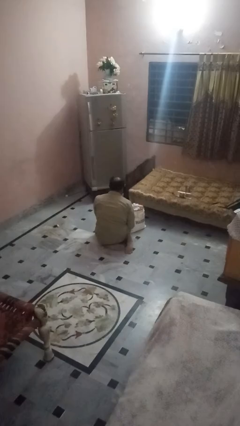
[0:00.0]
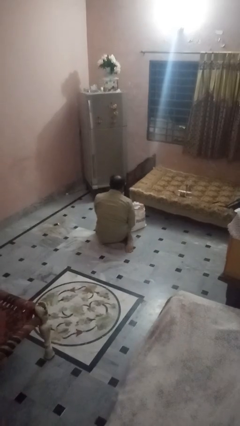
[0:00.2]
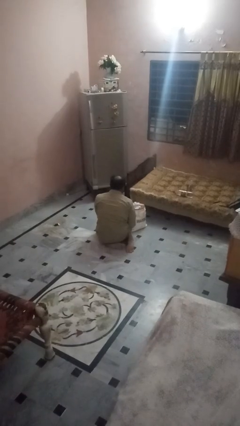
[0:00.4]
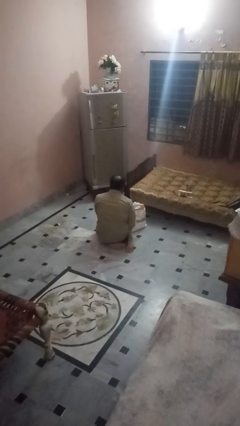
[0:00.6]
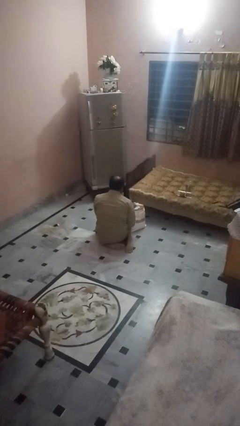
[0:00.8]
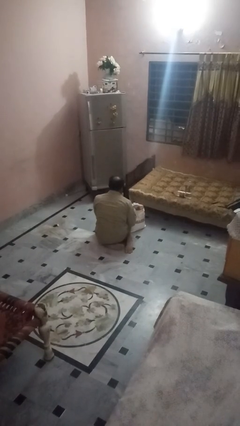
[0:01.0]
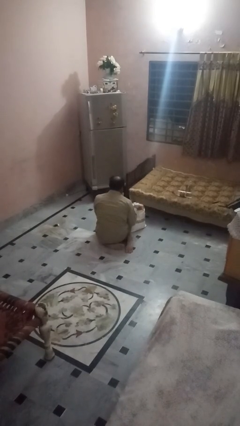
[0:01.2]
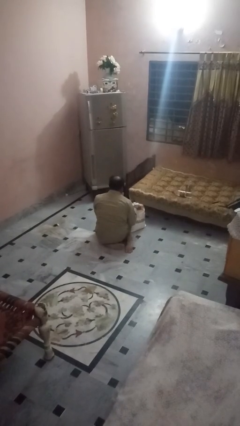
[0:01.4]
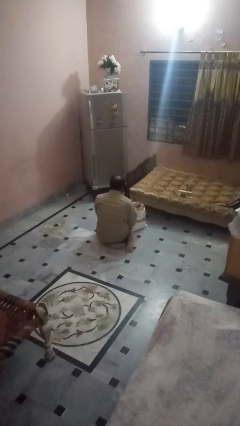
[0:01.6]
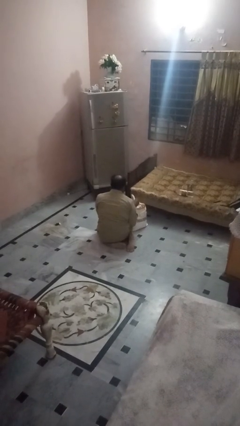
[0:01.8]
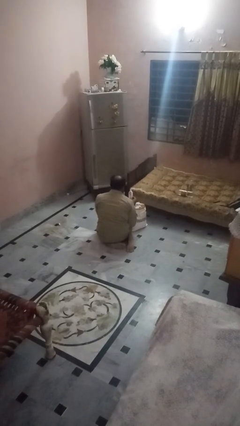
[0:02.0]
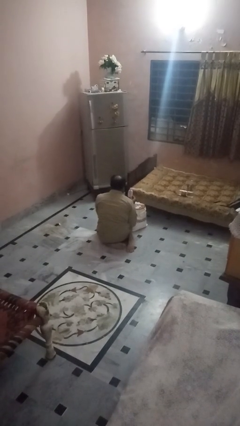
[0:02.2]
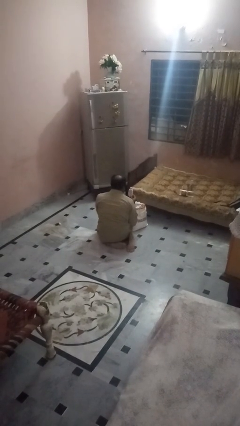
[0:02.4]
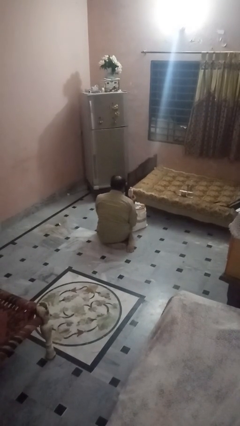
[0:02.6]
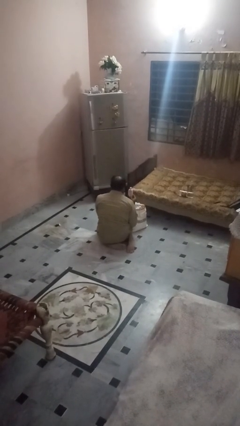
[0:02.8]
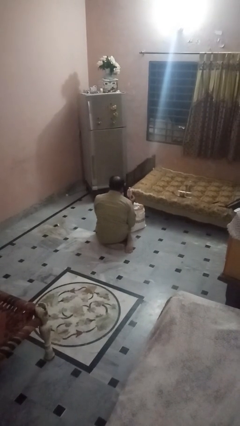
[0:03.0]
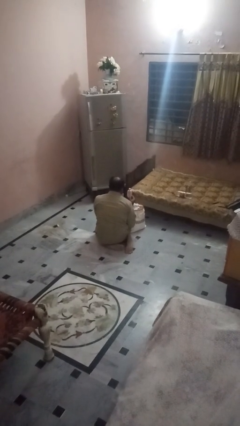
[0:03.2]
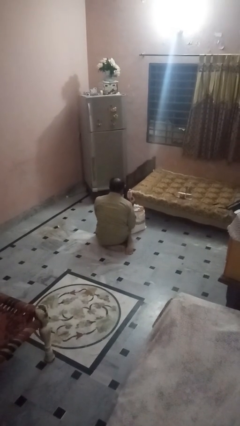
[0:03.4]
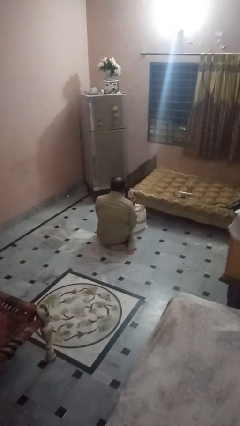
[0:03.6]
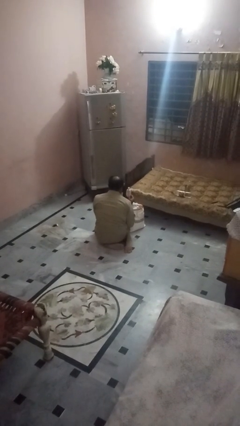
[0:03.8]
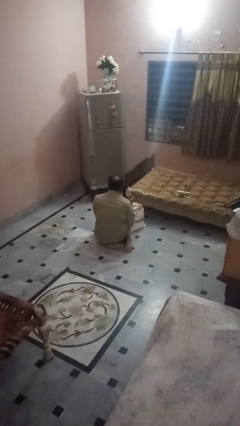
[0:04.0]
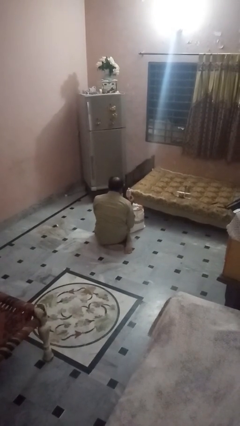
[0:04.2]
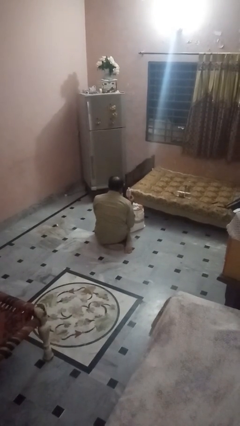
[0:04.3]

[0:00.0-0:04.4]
person takes object from bag

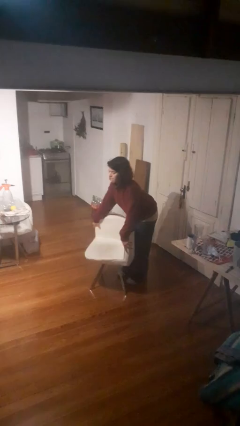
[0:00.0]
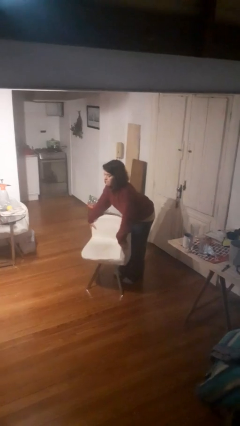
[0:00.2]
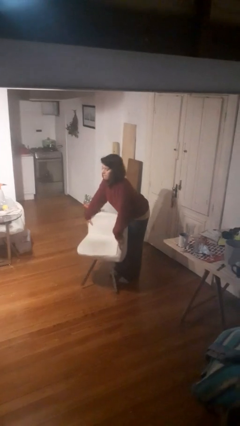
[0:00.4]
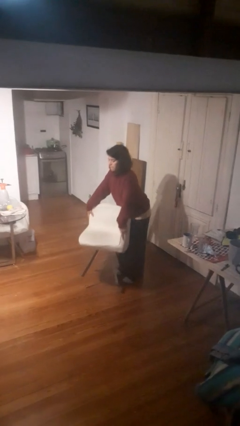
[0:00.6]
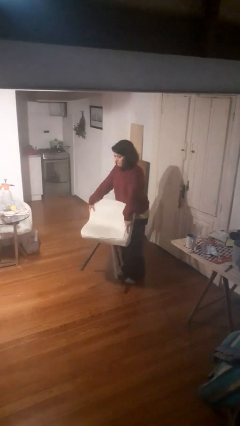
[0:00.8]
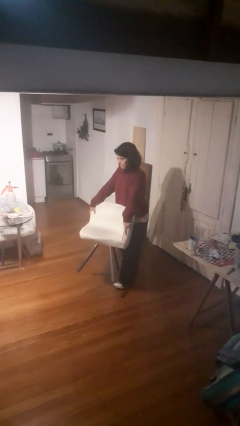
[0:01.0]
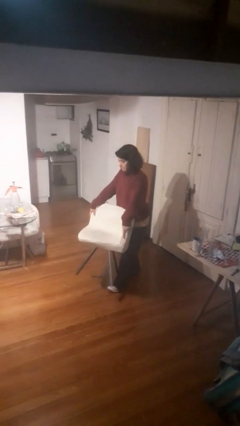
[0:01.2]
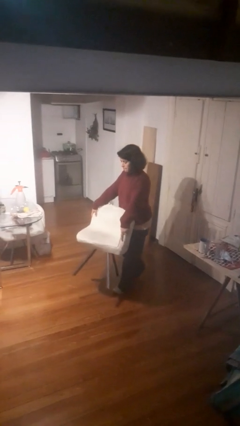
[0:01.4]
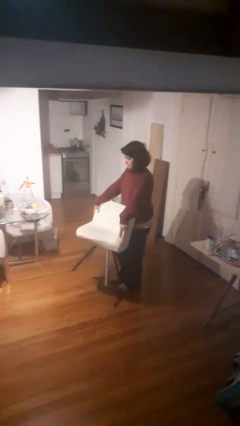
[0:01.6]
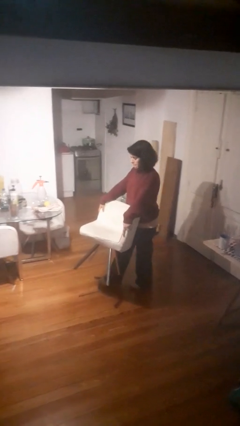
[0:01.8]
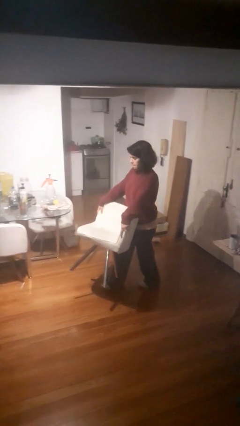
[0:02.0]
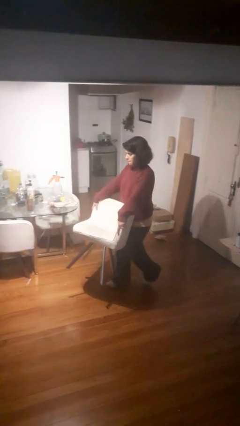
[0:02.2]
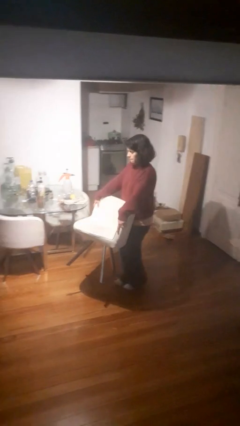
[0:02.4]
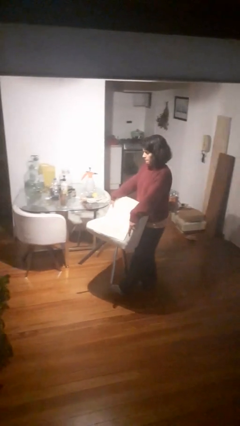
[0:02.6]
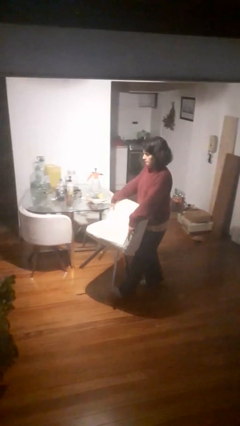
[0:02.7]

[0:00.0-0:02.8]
person carries furniture

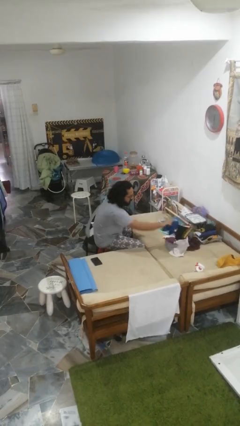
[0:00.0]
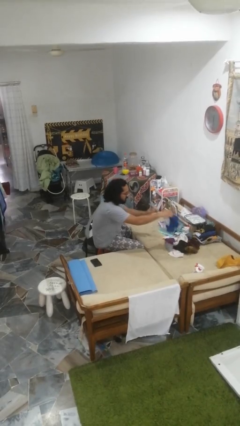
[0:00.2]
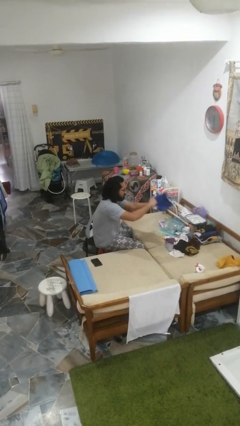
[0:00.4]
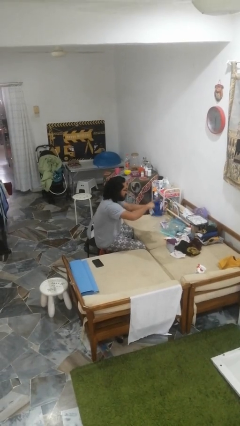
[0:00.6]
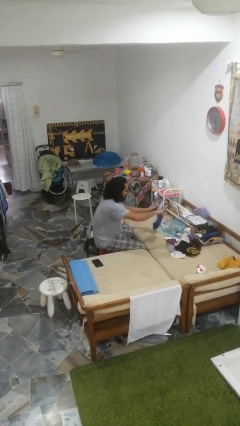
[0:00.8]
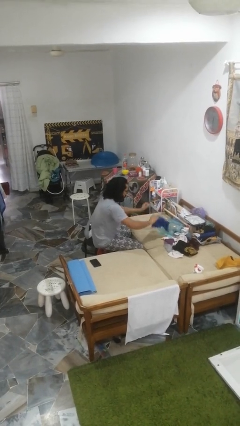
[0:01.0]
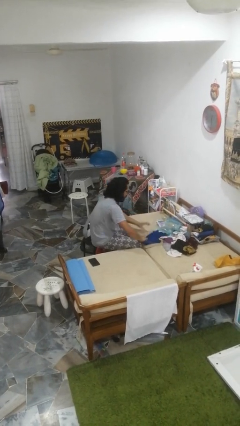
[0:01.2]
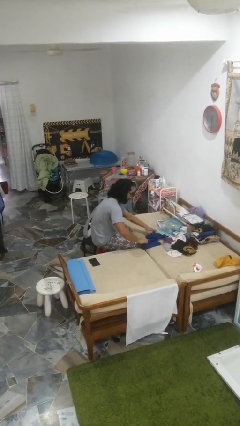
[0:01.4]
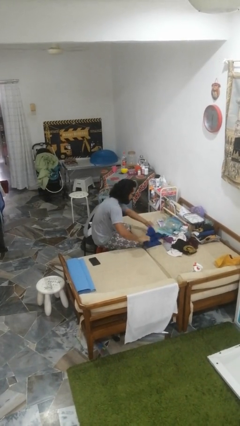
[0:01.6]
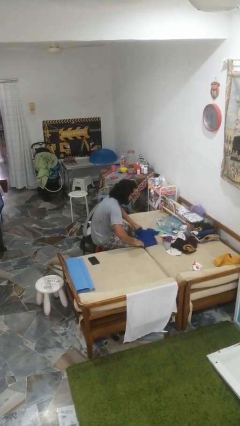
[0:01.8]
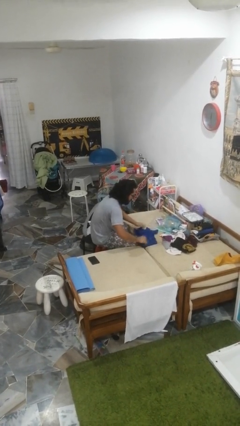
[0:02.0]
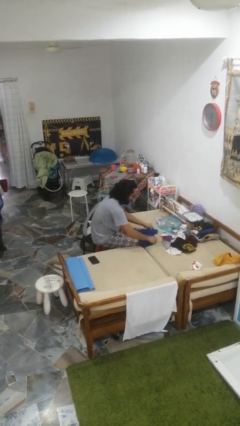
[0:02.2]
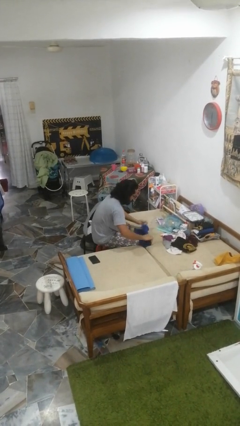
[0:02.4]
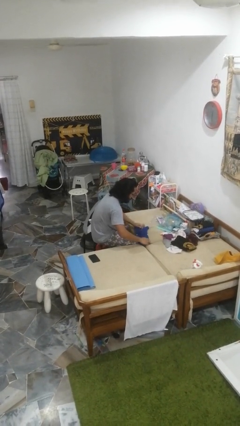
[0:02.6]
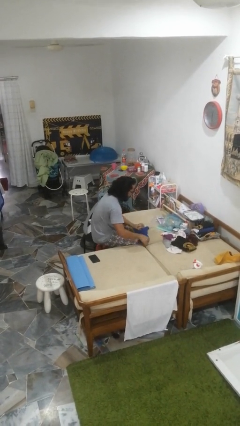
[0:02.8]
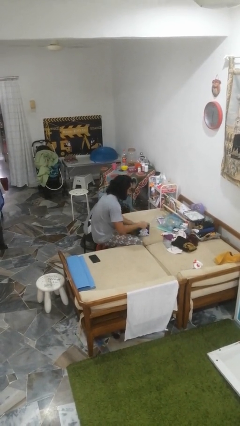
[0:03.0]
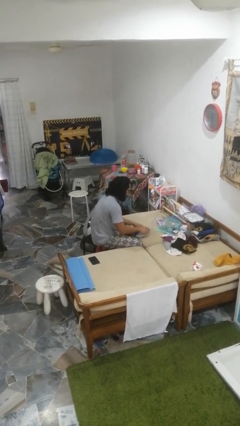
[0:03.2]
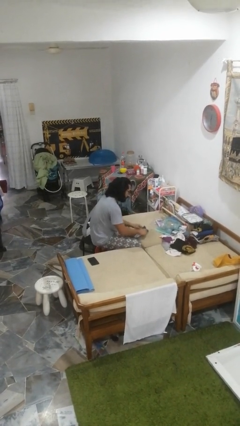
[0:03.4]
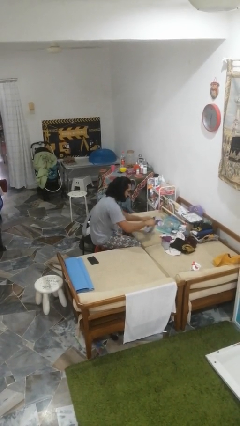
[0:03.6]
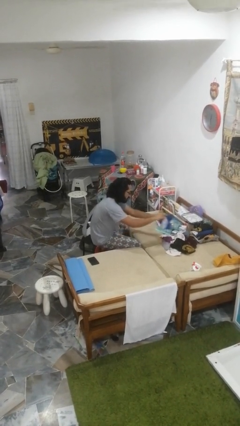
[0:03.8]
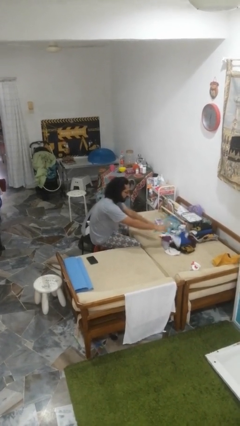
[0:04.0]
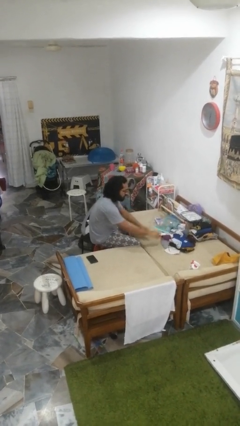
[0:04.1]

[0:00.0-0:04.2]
person folds shirt

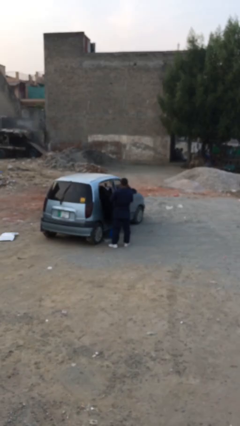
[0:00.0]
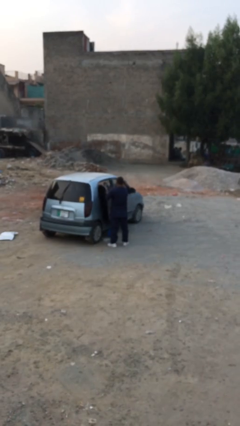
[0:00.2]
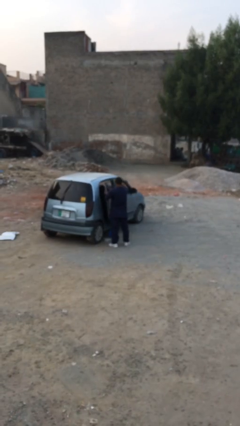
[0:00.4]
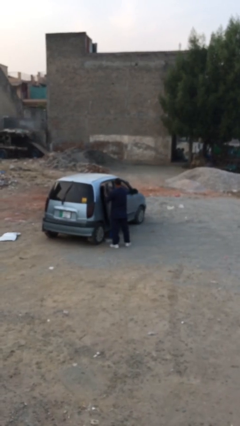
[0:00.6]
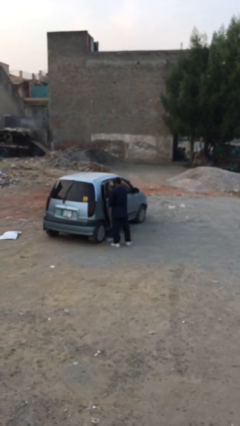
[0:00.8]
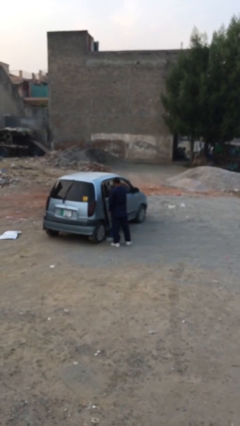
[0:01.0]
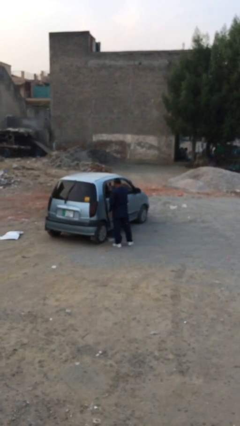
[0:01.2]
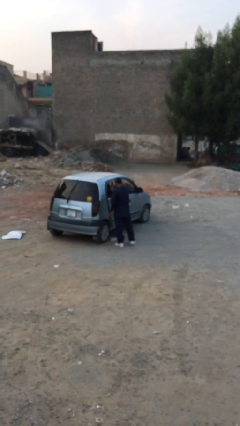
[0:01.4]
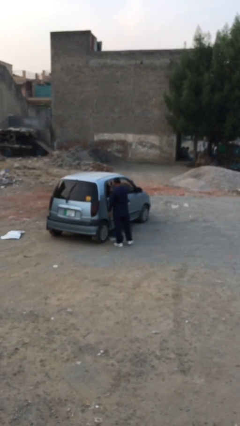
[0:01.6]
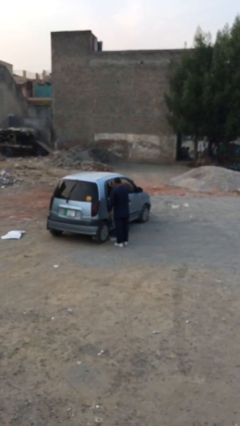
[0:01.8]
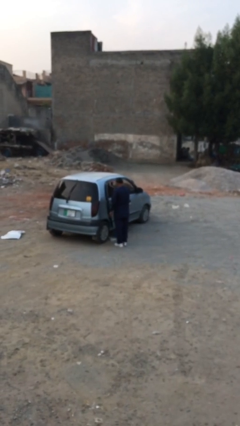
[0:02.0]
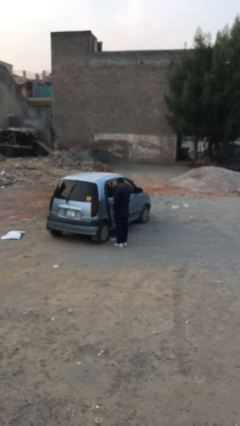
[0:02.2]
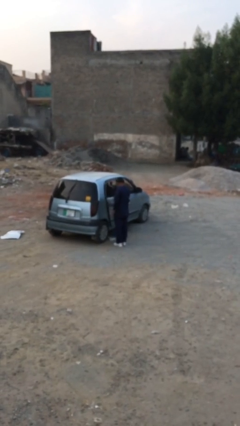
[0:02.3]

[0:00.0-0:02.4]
person closes car door

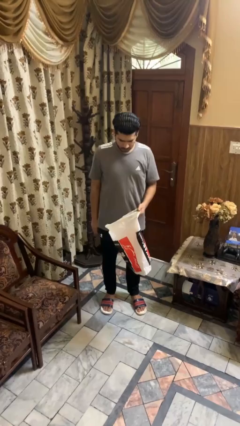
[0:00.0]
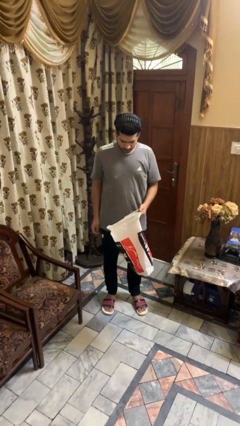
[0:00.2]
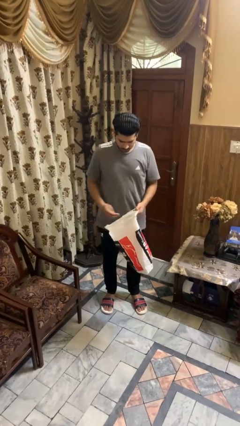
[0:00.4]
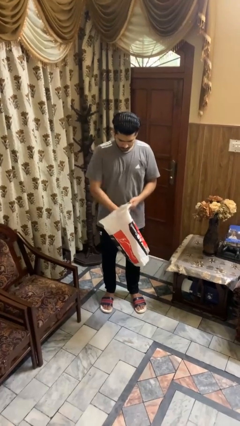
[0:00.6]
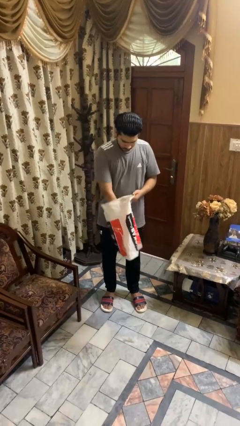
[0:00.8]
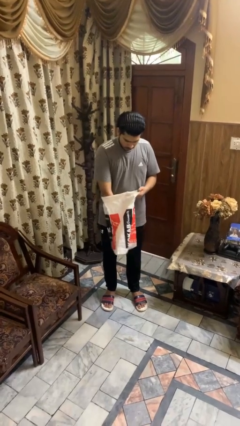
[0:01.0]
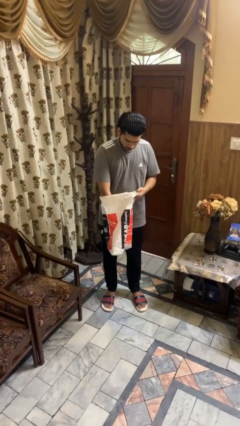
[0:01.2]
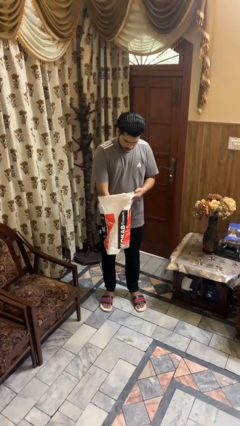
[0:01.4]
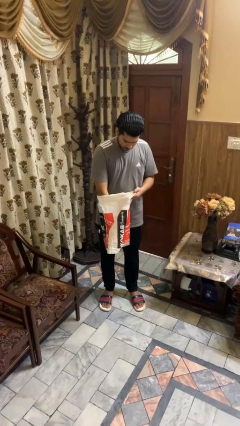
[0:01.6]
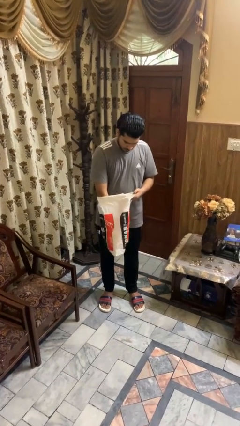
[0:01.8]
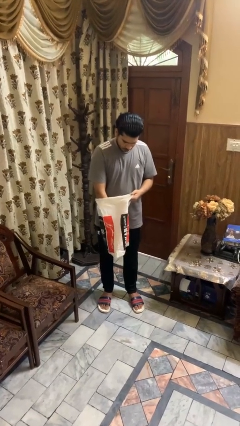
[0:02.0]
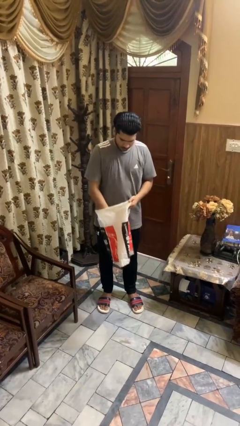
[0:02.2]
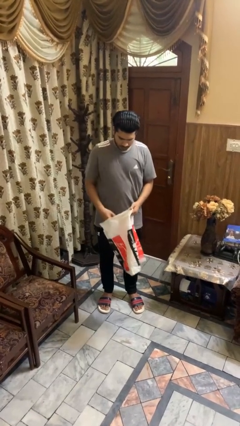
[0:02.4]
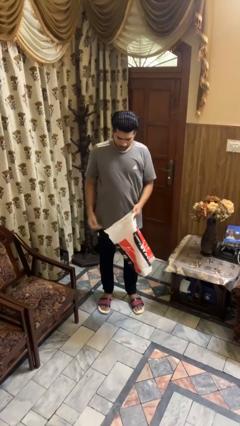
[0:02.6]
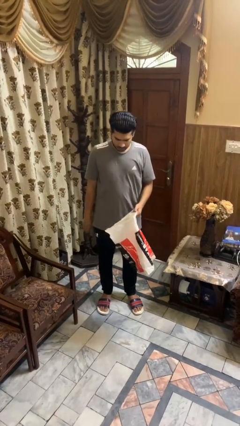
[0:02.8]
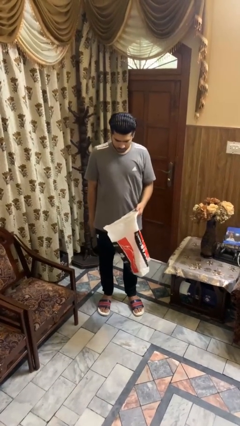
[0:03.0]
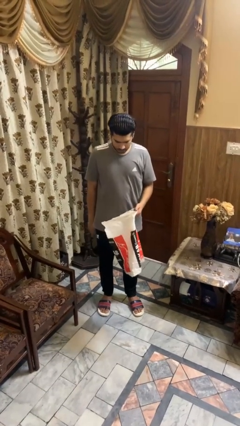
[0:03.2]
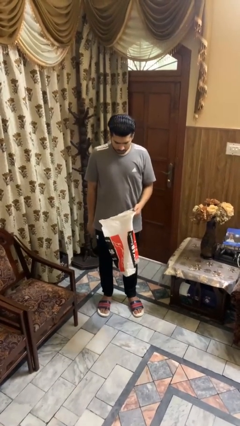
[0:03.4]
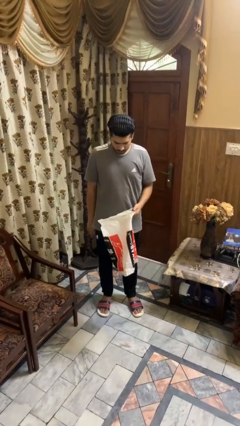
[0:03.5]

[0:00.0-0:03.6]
person searches in bag
